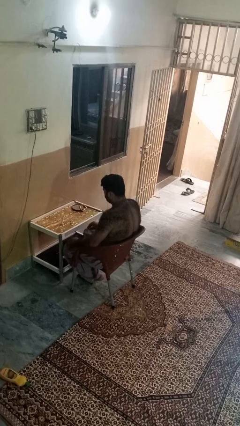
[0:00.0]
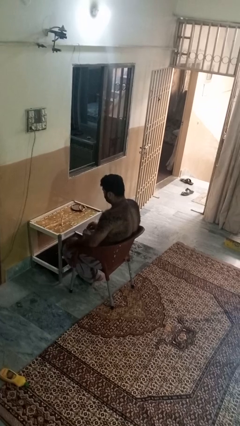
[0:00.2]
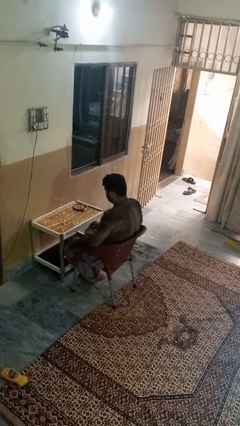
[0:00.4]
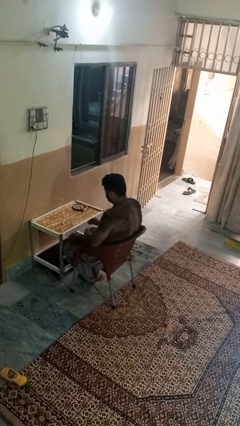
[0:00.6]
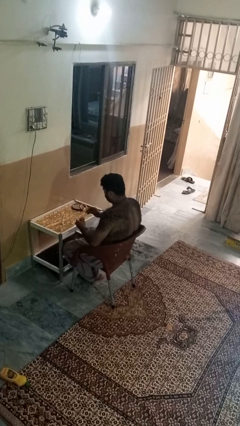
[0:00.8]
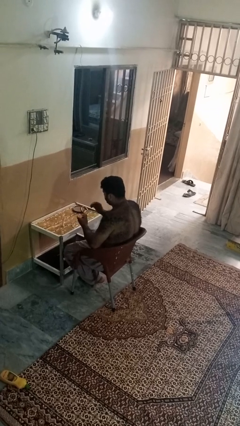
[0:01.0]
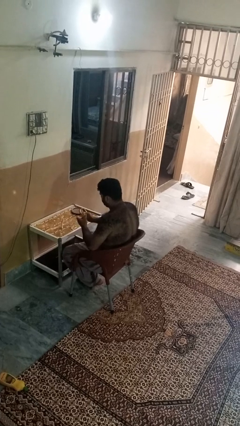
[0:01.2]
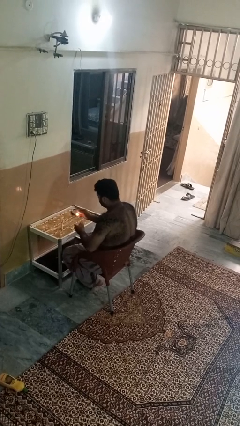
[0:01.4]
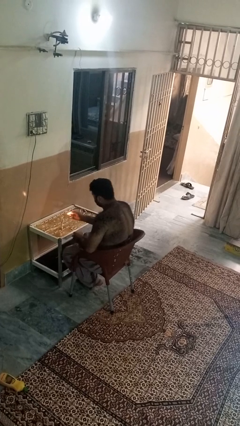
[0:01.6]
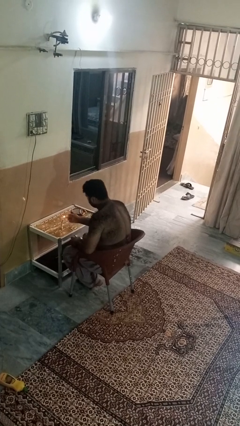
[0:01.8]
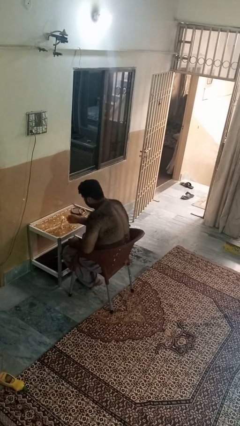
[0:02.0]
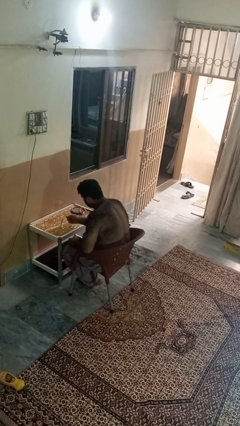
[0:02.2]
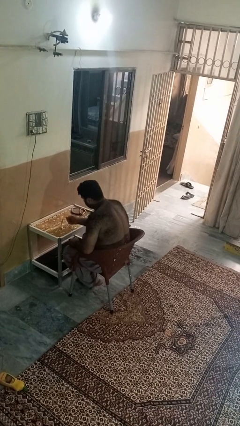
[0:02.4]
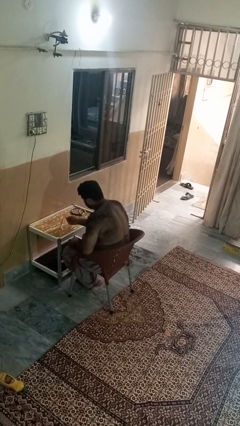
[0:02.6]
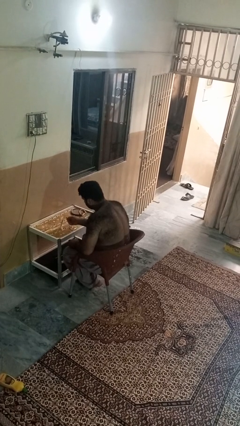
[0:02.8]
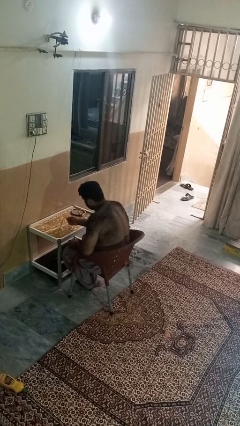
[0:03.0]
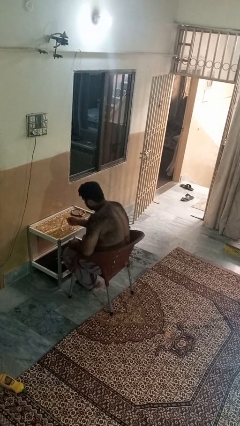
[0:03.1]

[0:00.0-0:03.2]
person nods head

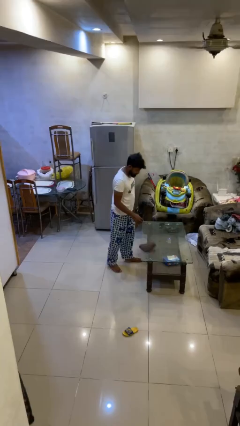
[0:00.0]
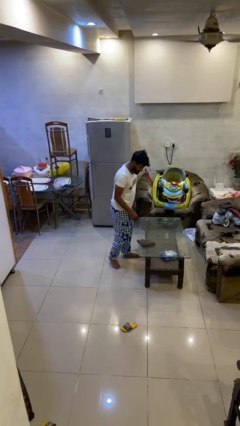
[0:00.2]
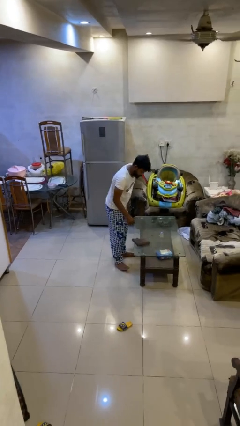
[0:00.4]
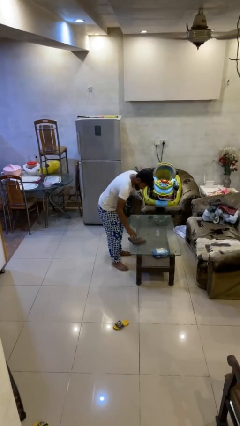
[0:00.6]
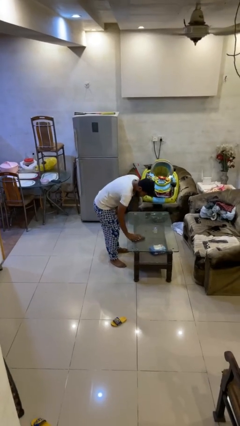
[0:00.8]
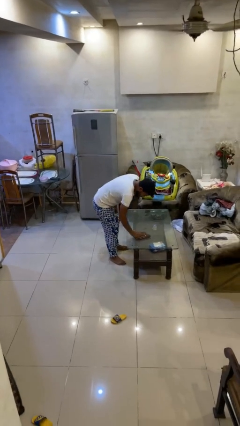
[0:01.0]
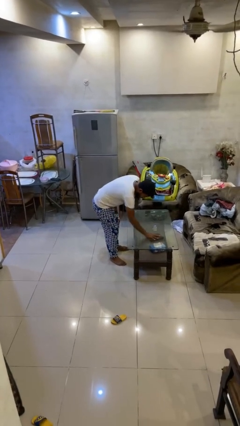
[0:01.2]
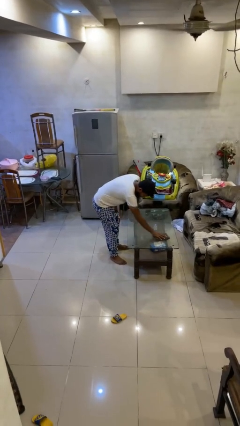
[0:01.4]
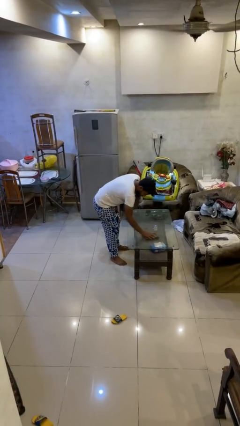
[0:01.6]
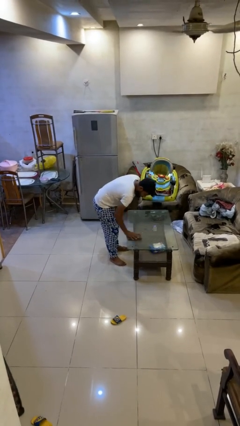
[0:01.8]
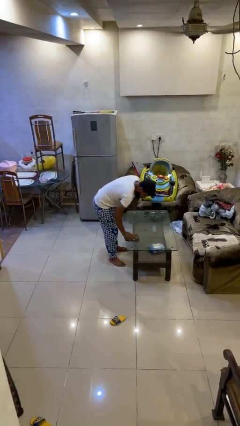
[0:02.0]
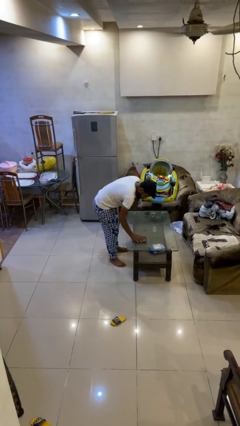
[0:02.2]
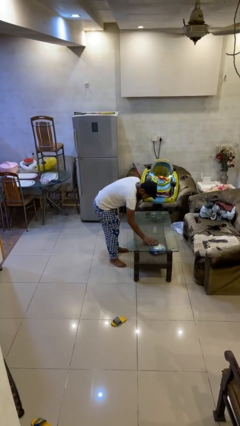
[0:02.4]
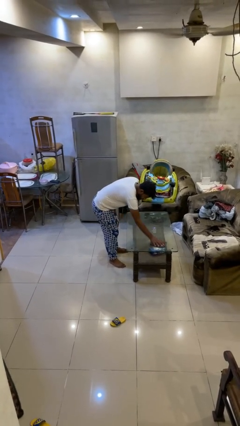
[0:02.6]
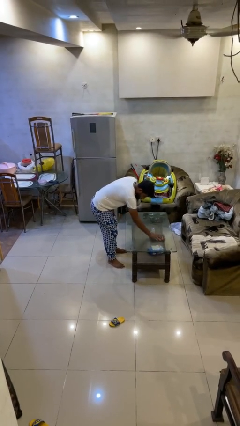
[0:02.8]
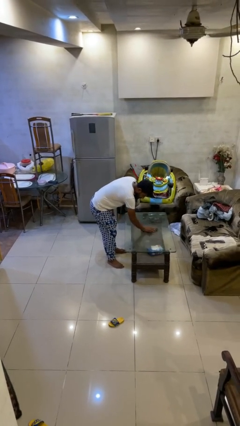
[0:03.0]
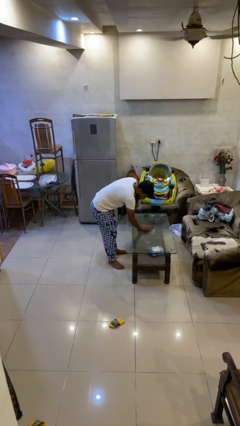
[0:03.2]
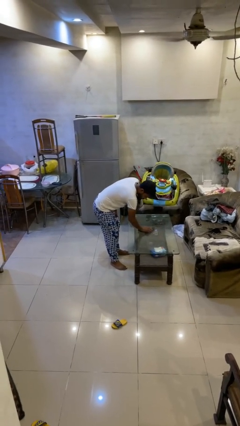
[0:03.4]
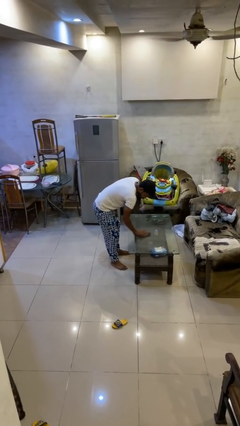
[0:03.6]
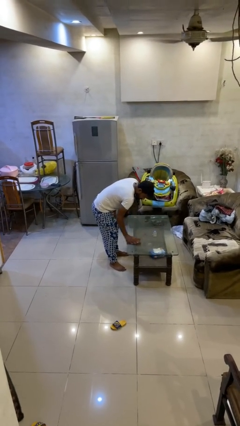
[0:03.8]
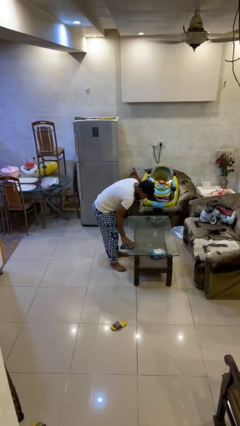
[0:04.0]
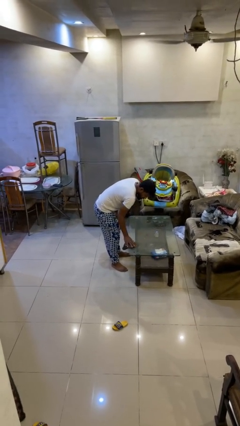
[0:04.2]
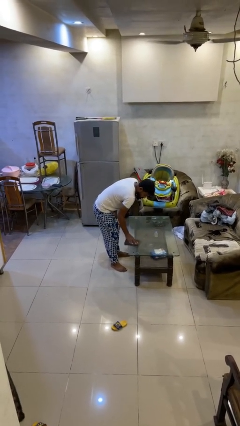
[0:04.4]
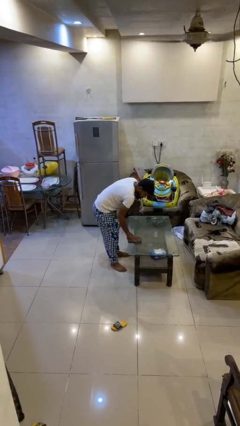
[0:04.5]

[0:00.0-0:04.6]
person cleans table with rag

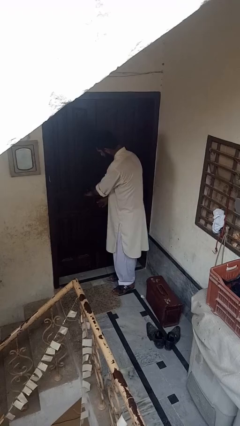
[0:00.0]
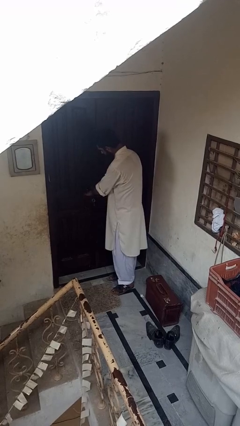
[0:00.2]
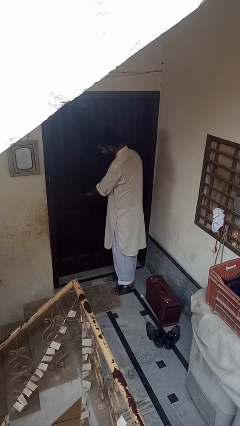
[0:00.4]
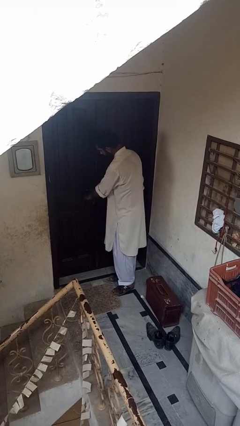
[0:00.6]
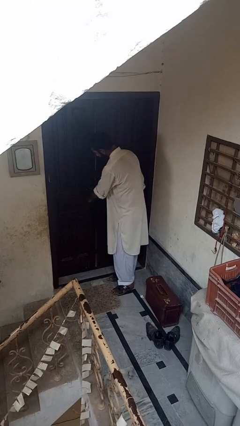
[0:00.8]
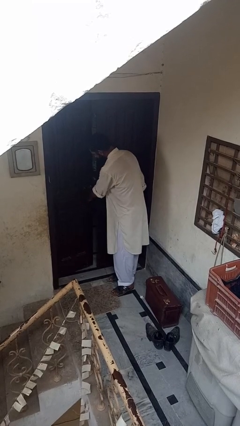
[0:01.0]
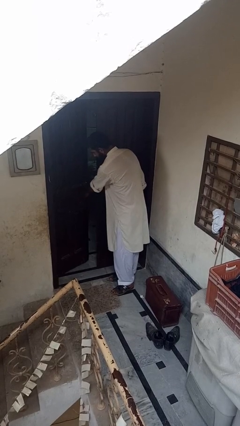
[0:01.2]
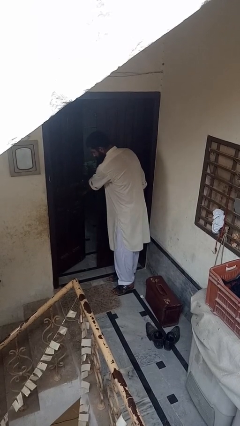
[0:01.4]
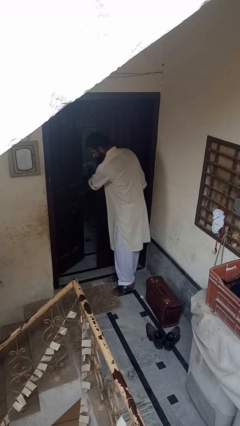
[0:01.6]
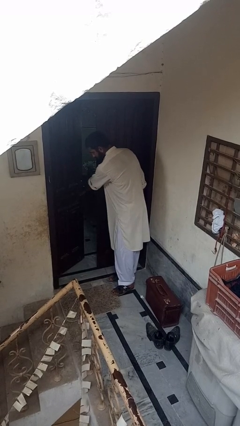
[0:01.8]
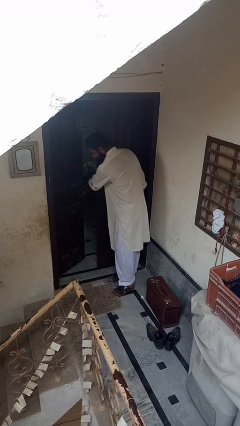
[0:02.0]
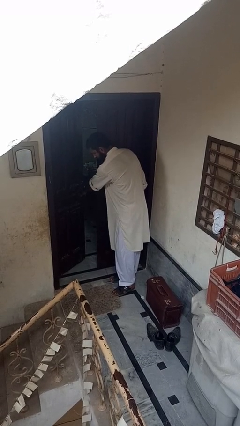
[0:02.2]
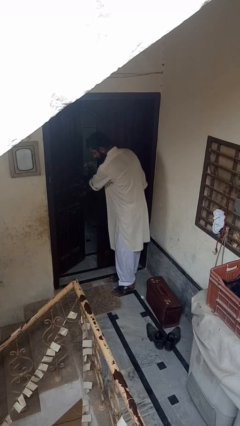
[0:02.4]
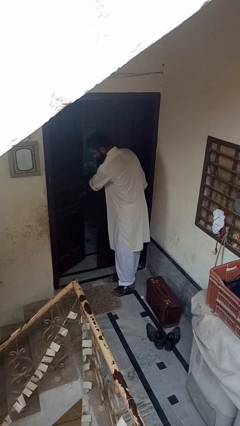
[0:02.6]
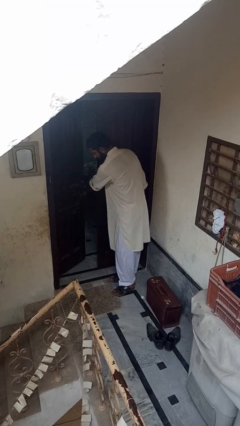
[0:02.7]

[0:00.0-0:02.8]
person opens facility door

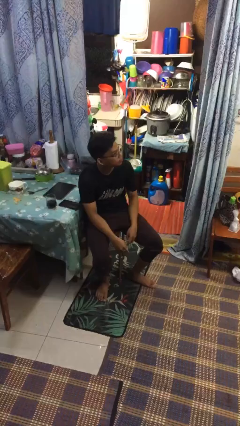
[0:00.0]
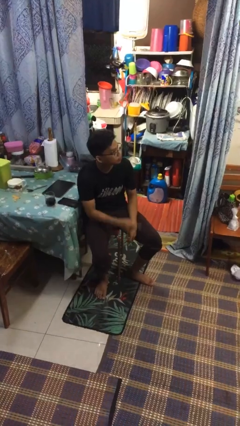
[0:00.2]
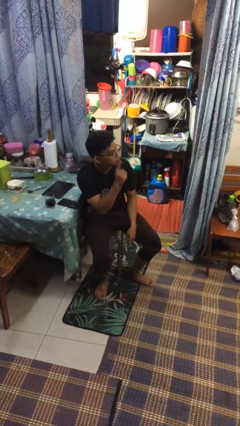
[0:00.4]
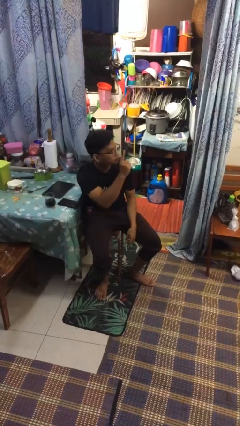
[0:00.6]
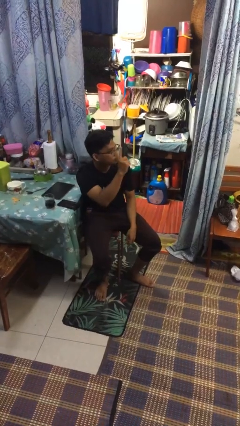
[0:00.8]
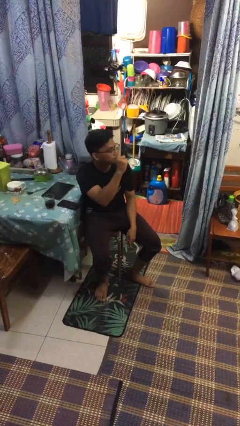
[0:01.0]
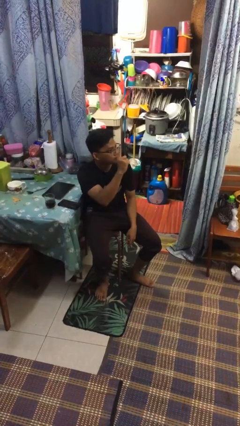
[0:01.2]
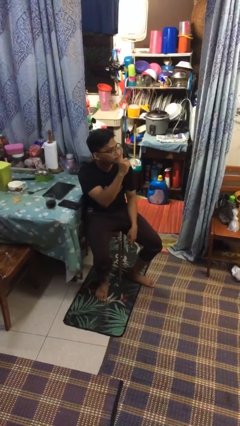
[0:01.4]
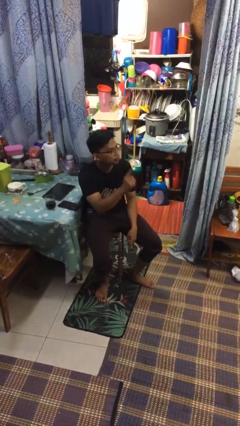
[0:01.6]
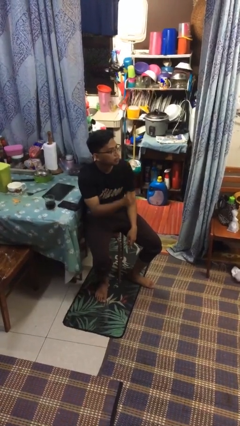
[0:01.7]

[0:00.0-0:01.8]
person gestures number one

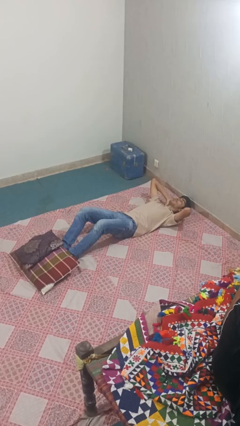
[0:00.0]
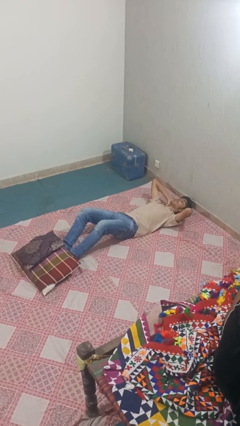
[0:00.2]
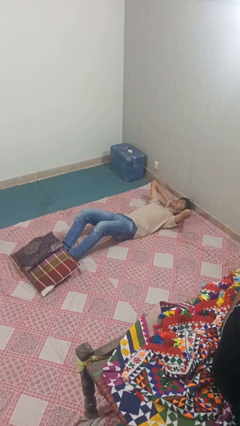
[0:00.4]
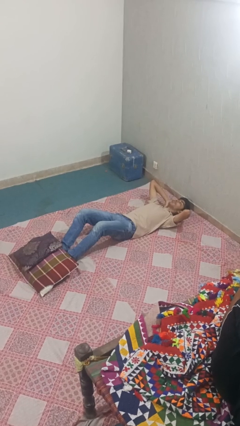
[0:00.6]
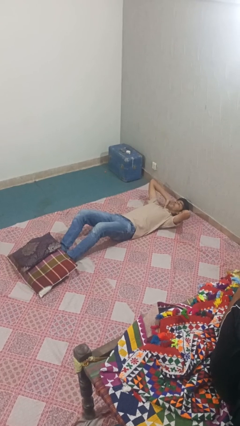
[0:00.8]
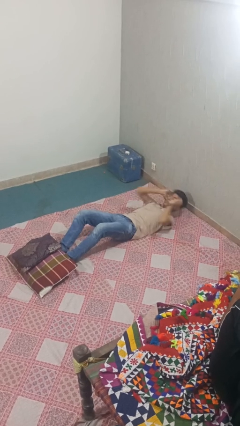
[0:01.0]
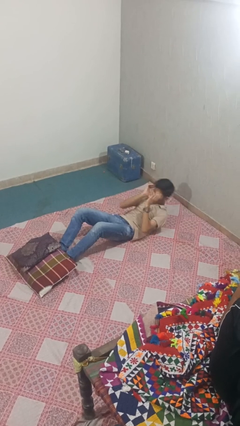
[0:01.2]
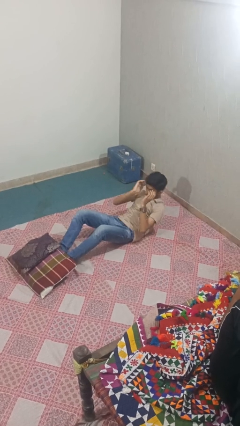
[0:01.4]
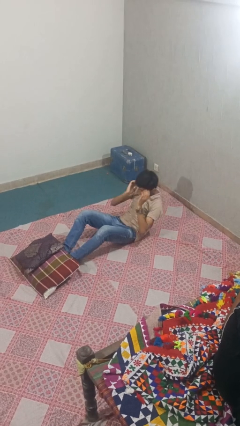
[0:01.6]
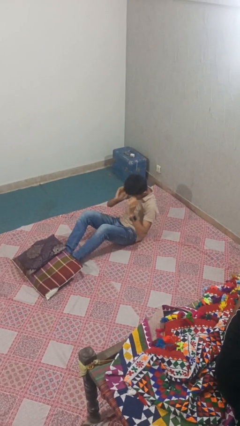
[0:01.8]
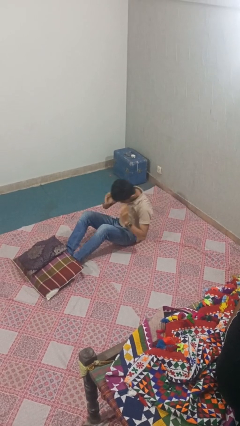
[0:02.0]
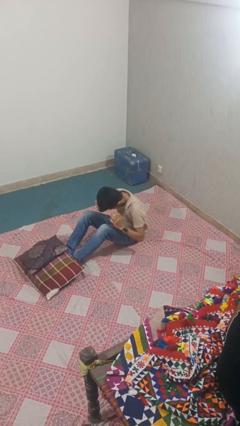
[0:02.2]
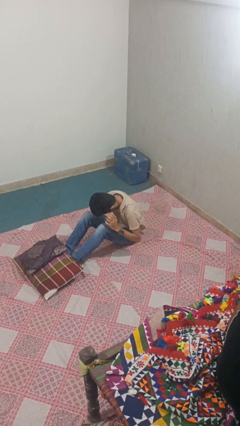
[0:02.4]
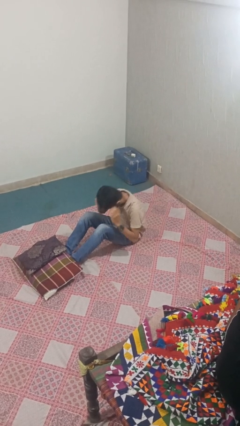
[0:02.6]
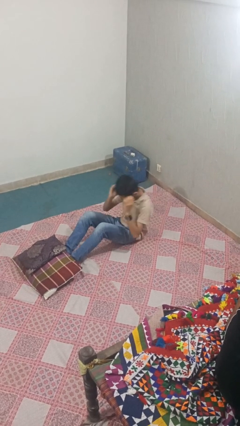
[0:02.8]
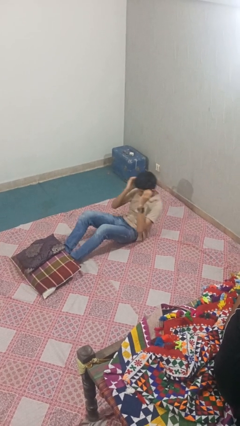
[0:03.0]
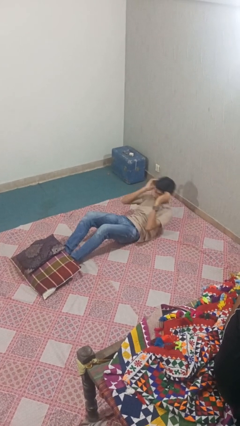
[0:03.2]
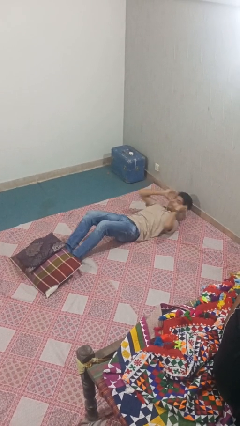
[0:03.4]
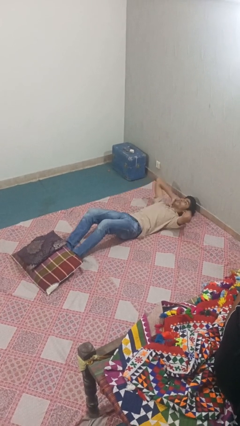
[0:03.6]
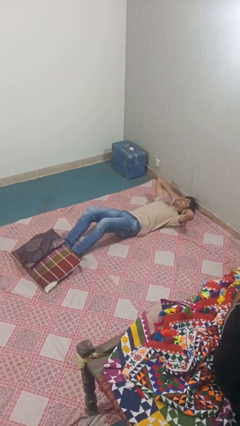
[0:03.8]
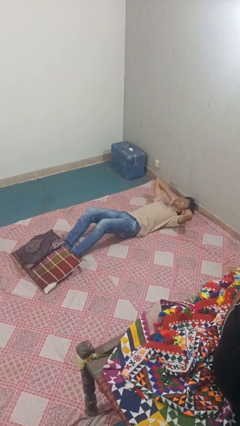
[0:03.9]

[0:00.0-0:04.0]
person exercises with situp

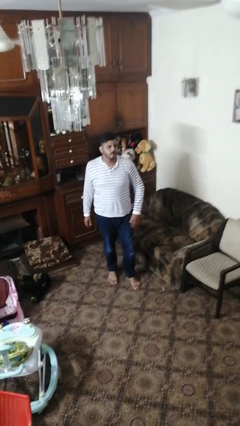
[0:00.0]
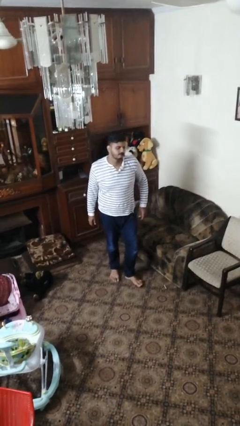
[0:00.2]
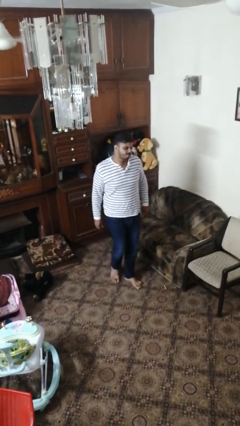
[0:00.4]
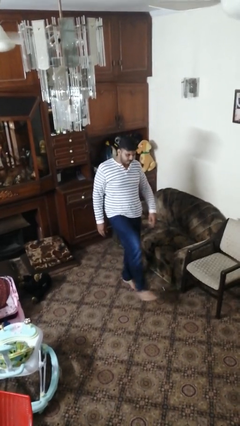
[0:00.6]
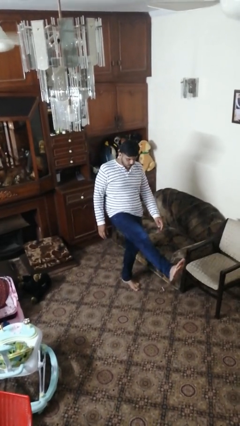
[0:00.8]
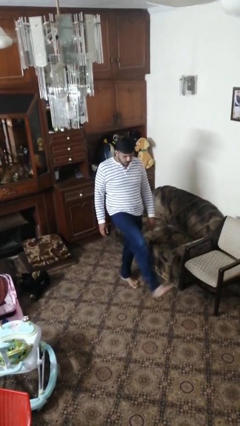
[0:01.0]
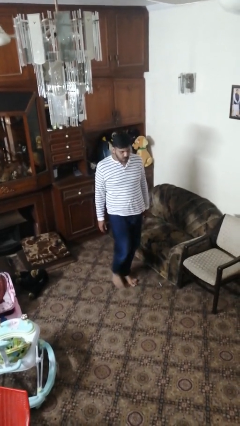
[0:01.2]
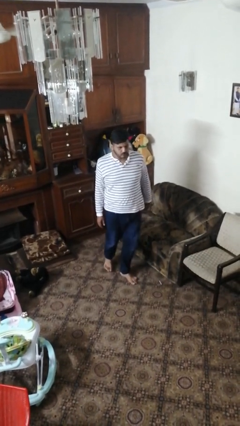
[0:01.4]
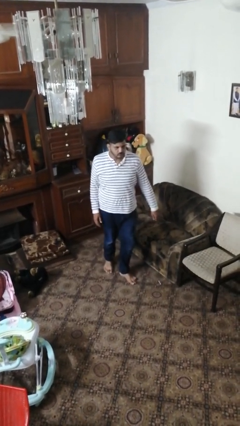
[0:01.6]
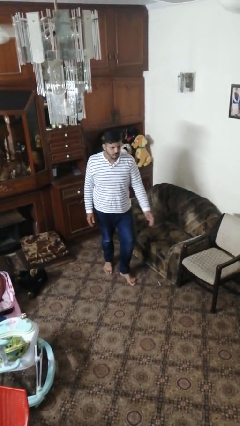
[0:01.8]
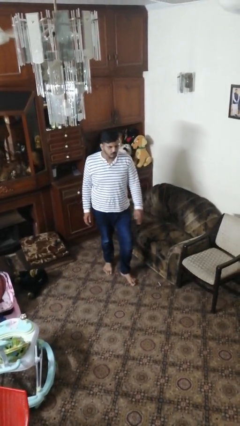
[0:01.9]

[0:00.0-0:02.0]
person karate kicks
